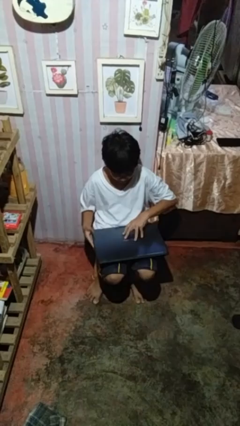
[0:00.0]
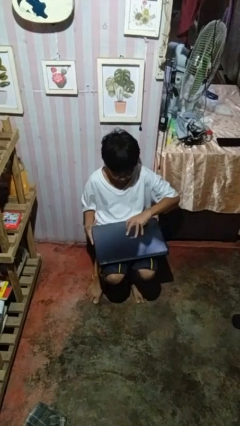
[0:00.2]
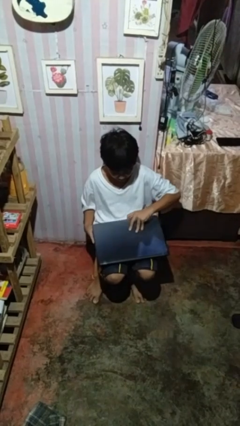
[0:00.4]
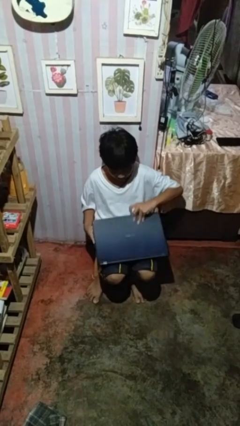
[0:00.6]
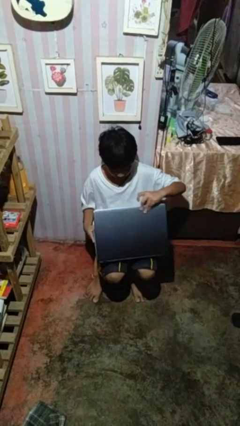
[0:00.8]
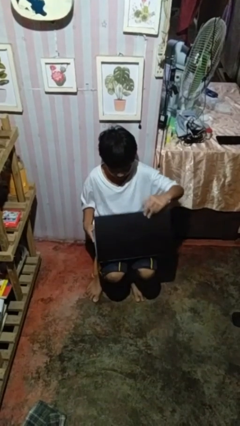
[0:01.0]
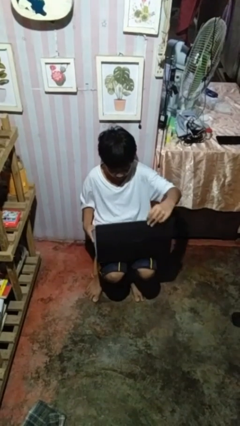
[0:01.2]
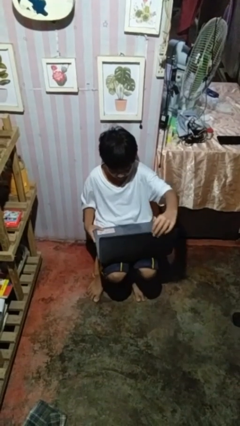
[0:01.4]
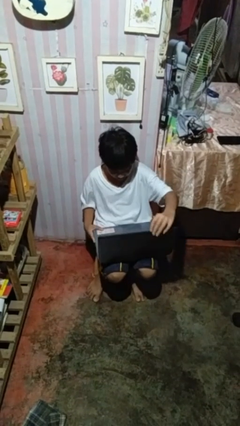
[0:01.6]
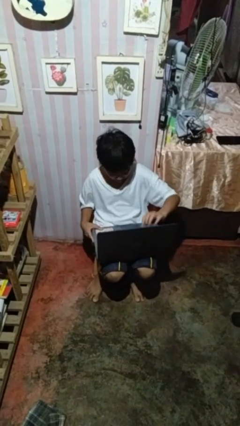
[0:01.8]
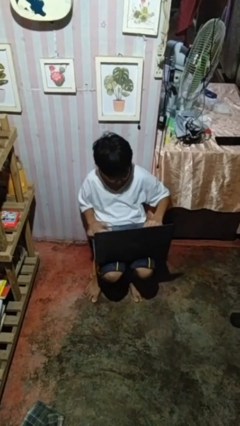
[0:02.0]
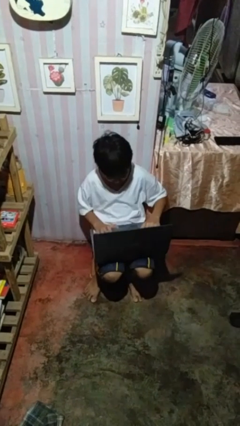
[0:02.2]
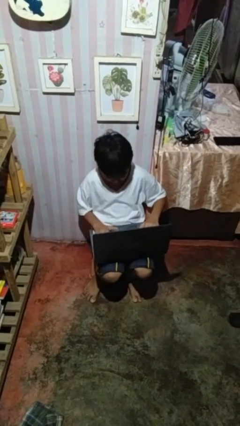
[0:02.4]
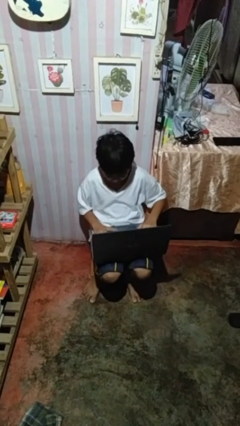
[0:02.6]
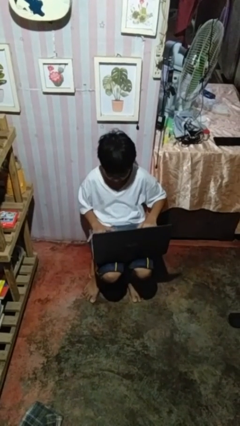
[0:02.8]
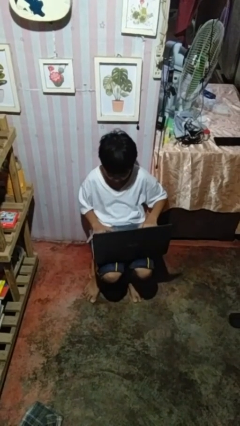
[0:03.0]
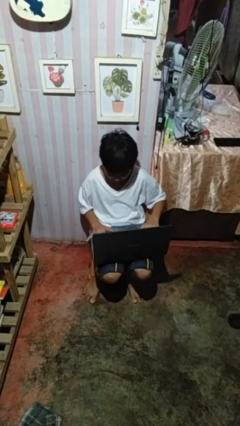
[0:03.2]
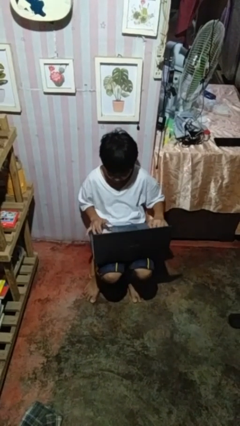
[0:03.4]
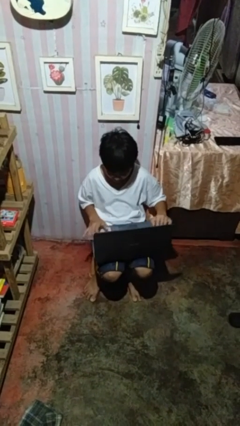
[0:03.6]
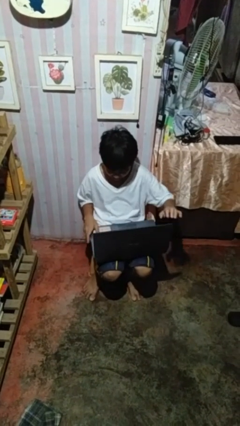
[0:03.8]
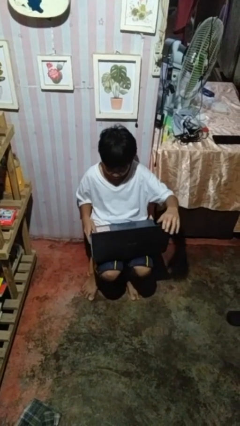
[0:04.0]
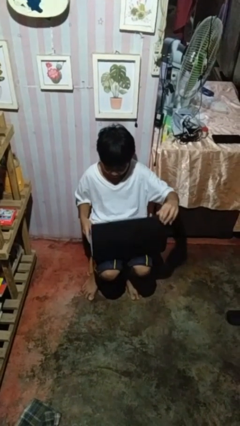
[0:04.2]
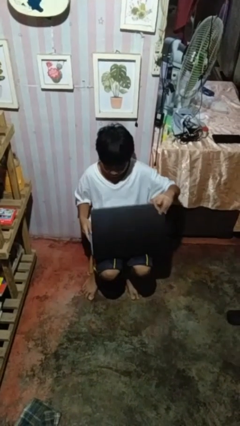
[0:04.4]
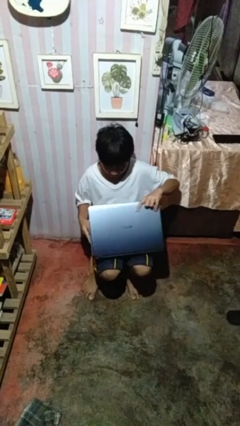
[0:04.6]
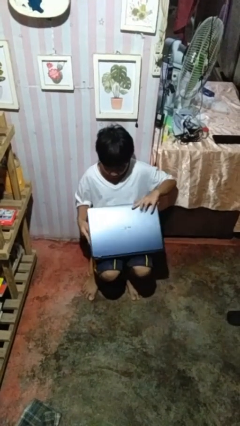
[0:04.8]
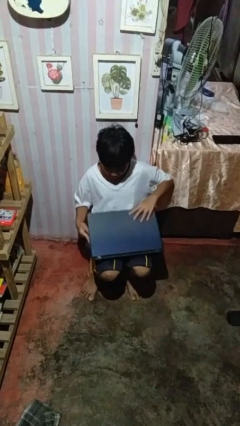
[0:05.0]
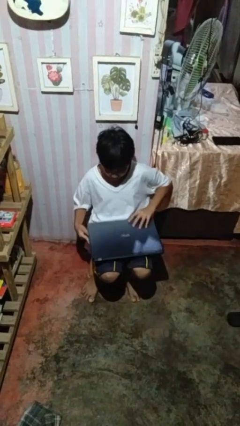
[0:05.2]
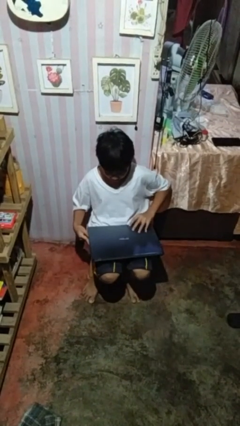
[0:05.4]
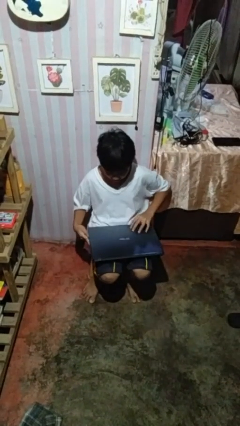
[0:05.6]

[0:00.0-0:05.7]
person interacts with laptop

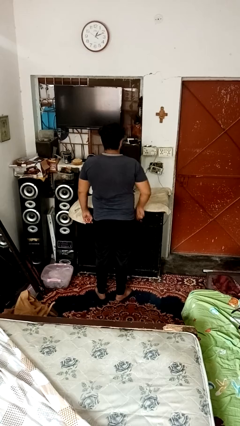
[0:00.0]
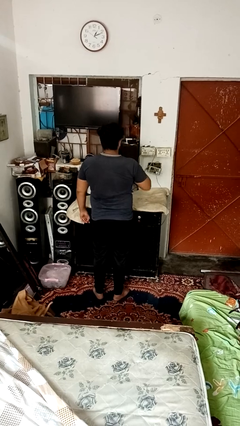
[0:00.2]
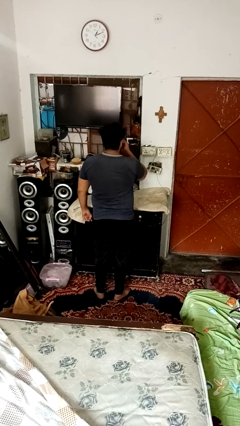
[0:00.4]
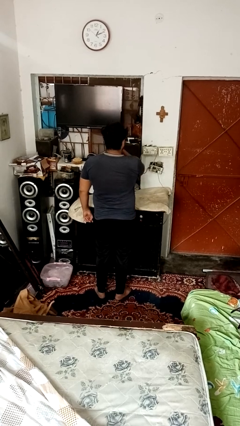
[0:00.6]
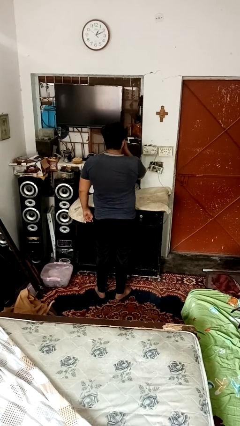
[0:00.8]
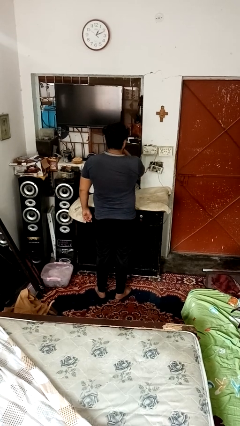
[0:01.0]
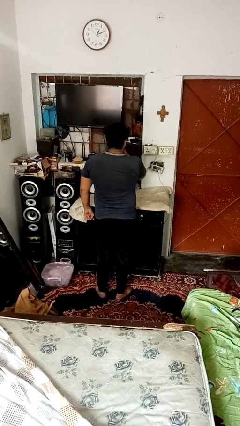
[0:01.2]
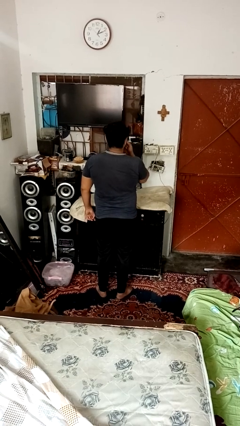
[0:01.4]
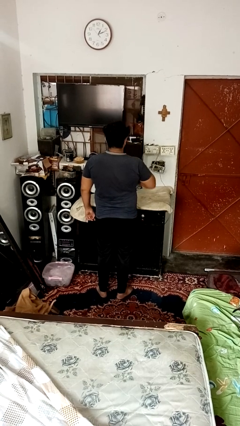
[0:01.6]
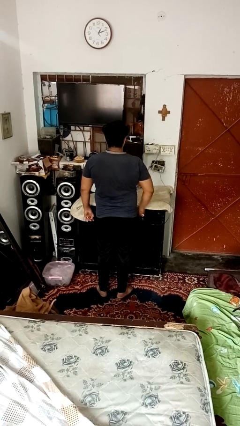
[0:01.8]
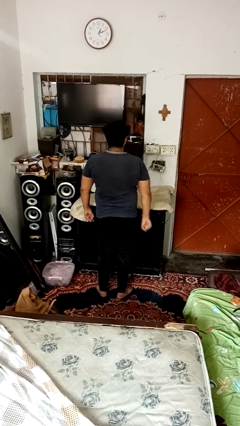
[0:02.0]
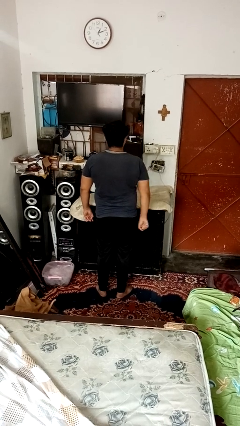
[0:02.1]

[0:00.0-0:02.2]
person applies lip makeup

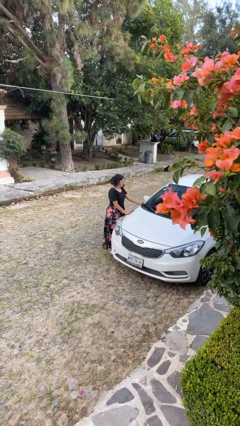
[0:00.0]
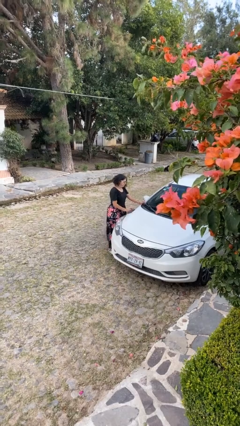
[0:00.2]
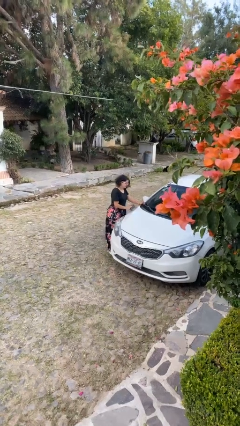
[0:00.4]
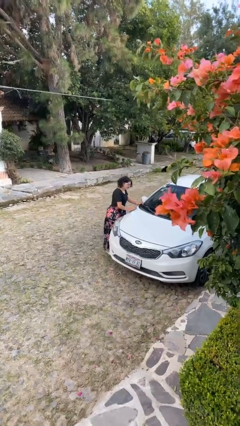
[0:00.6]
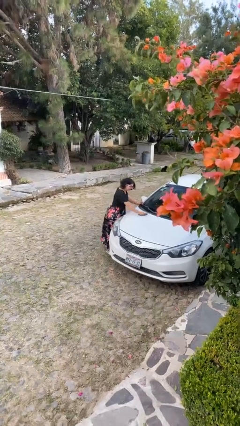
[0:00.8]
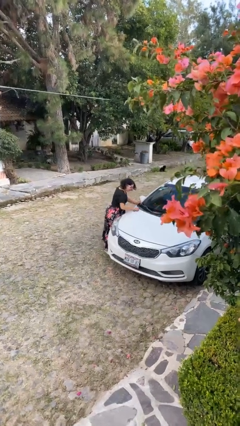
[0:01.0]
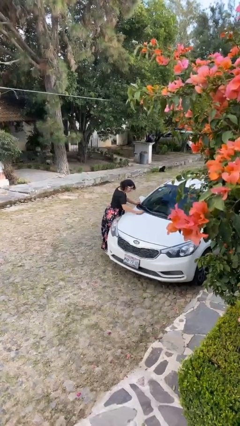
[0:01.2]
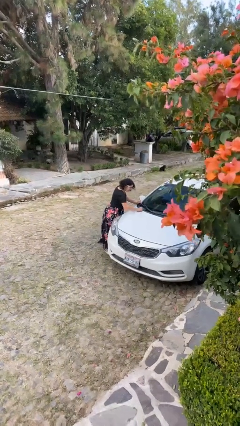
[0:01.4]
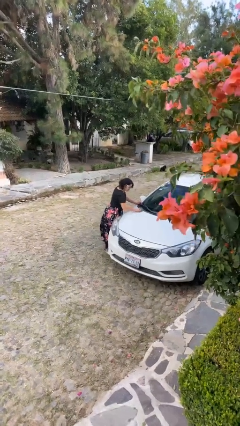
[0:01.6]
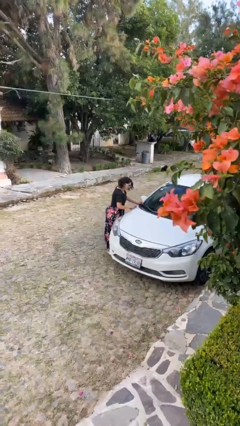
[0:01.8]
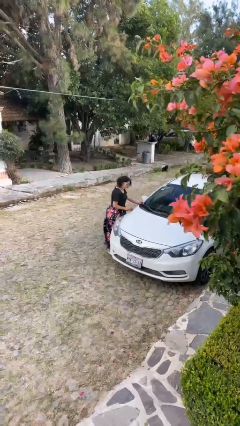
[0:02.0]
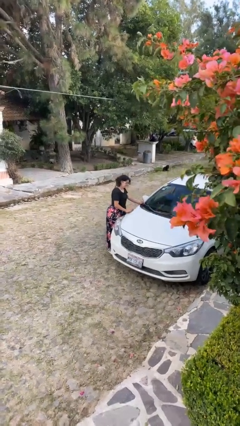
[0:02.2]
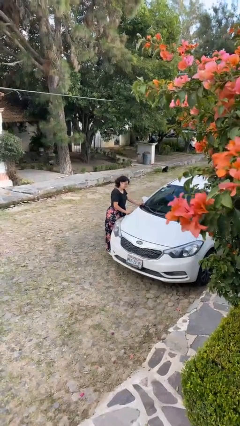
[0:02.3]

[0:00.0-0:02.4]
person polishes car with rag

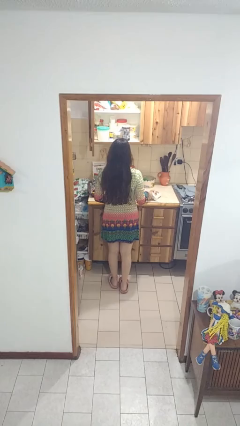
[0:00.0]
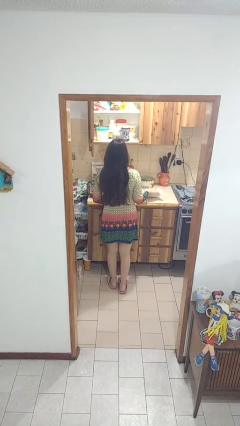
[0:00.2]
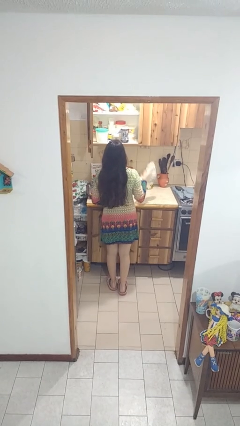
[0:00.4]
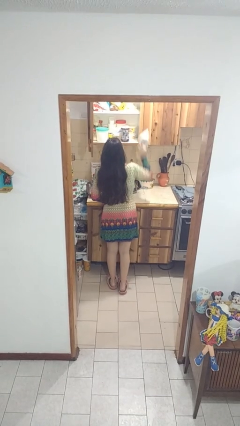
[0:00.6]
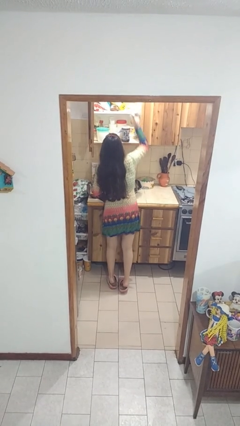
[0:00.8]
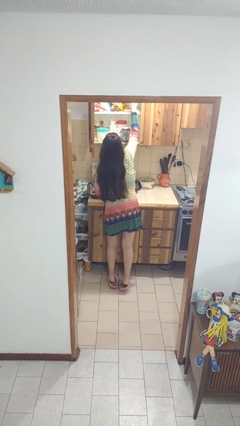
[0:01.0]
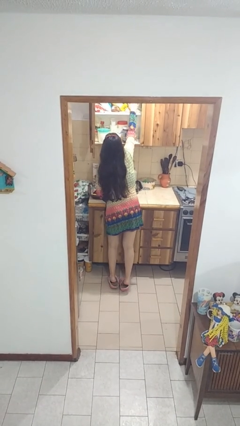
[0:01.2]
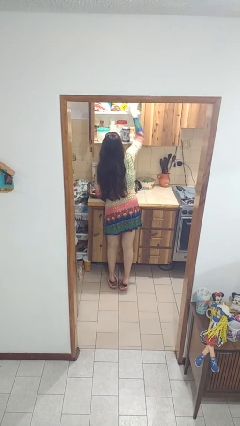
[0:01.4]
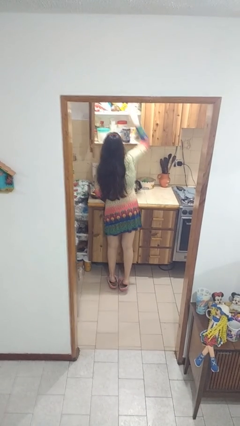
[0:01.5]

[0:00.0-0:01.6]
person puts object in cabinet

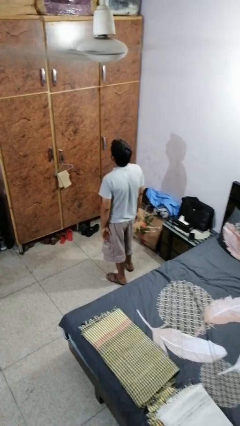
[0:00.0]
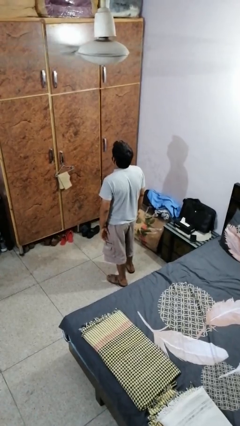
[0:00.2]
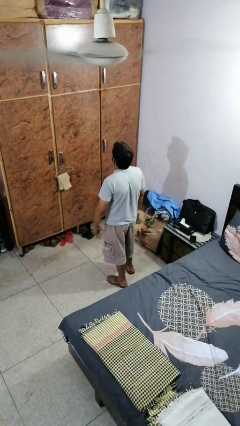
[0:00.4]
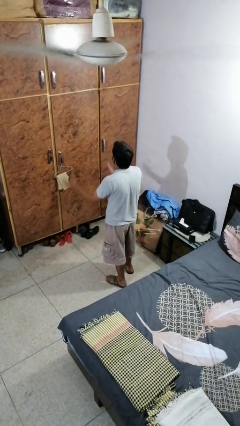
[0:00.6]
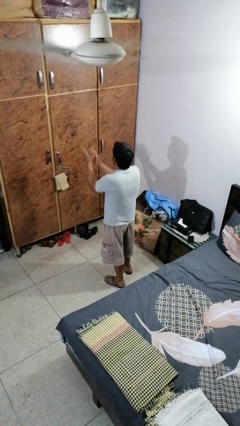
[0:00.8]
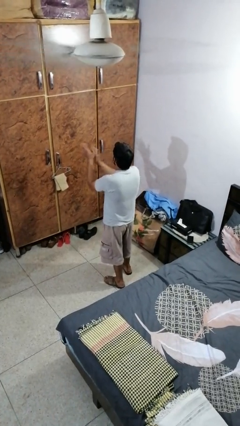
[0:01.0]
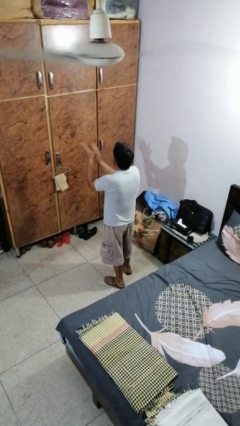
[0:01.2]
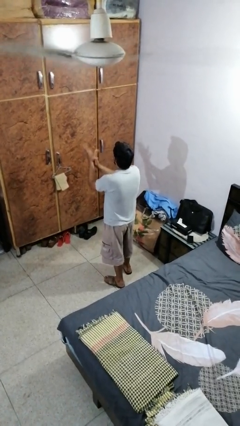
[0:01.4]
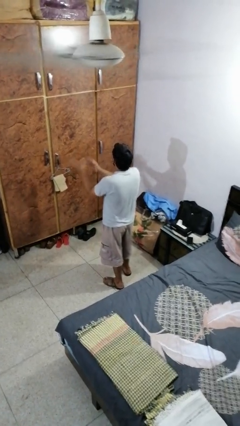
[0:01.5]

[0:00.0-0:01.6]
person claps hands

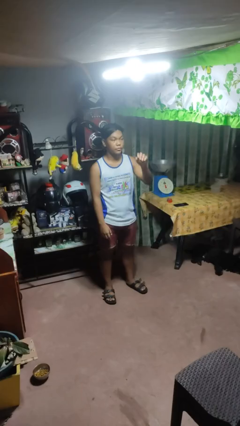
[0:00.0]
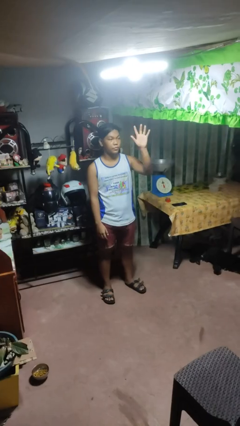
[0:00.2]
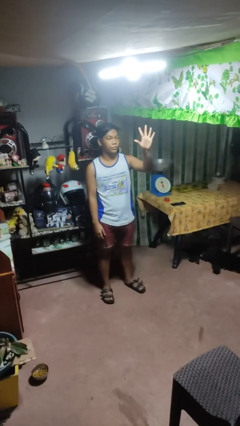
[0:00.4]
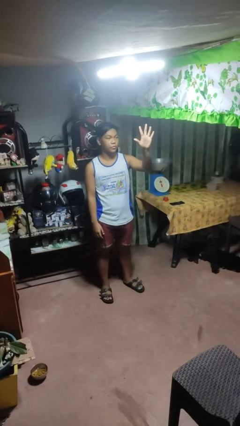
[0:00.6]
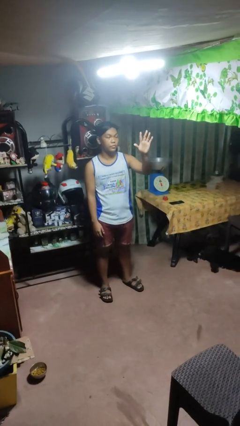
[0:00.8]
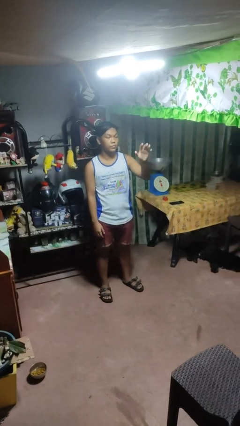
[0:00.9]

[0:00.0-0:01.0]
person gestures number five

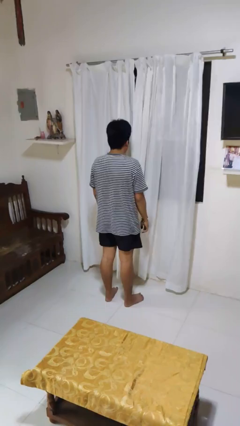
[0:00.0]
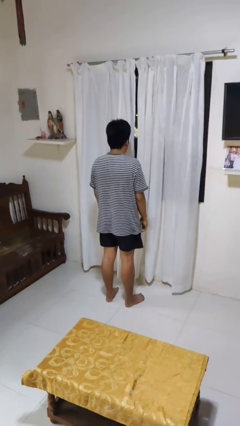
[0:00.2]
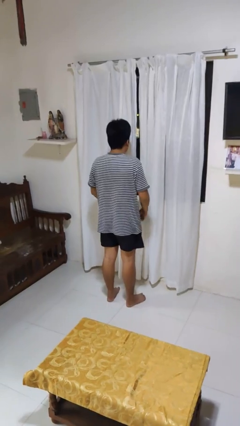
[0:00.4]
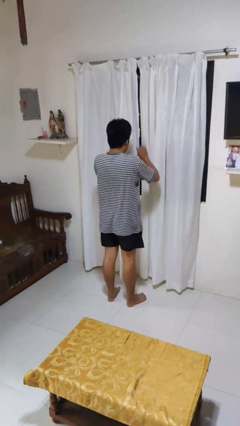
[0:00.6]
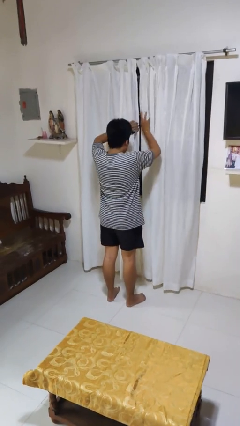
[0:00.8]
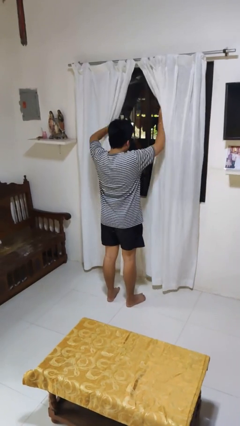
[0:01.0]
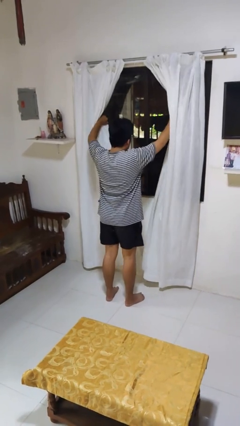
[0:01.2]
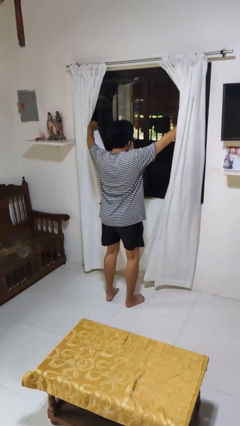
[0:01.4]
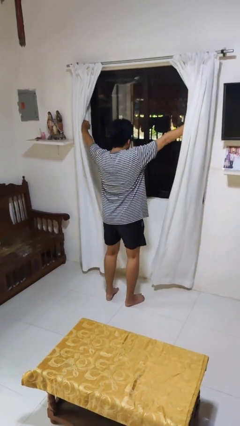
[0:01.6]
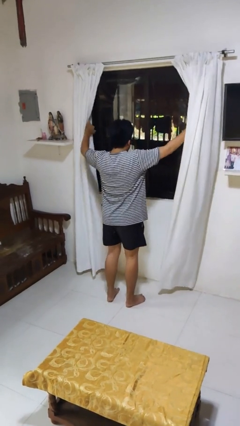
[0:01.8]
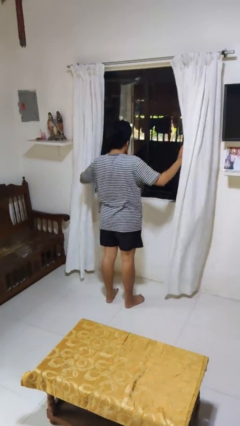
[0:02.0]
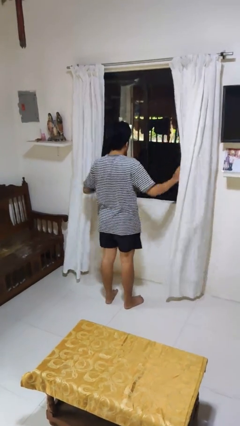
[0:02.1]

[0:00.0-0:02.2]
person opens curtains

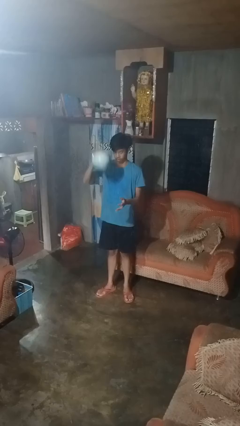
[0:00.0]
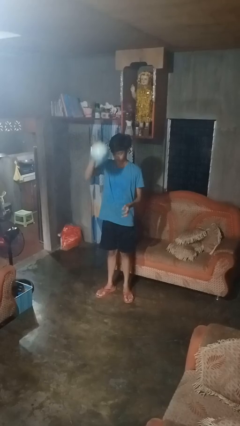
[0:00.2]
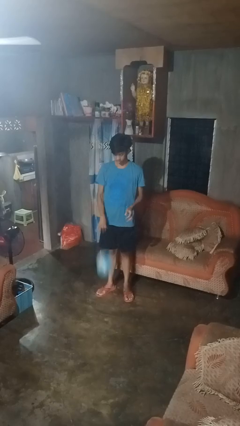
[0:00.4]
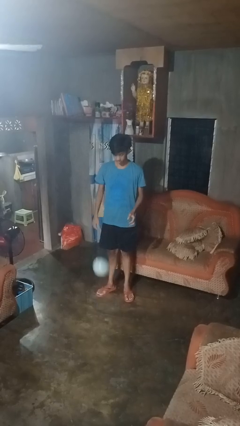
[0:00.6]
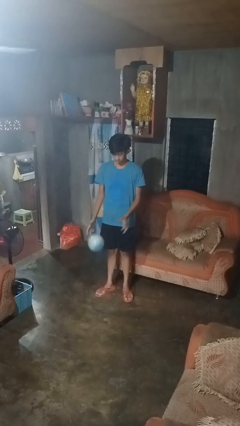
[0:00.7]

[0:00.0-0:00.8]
person bounces ball on floor
